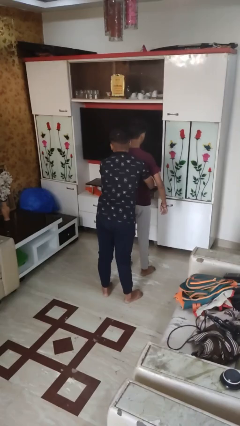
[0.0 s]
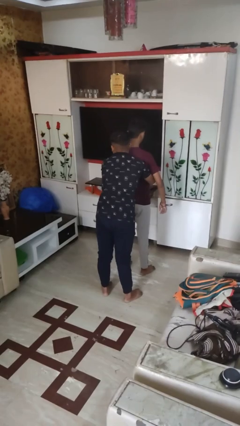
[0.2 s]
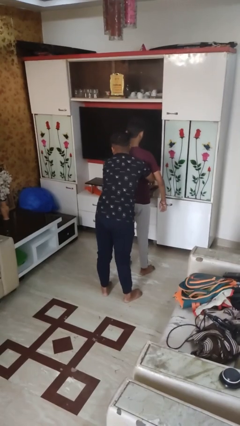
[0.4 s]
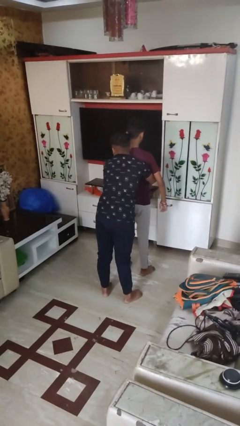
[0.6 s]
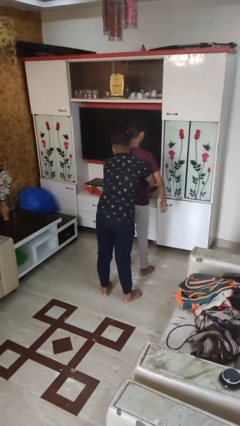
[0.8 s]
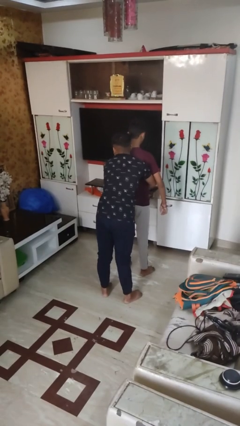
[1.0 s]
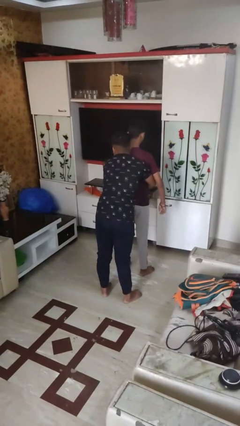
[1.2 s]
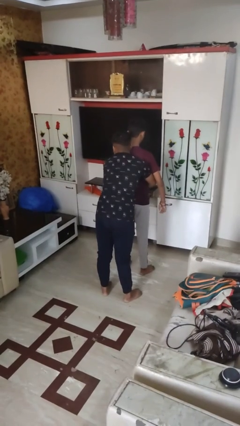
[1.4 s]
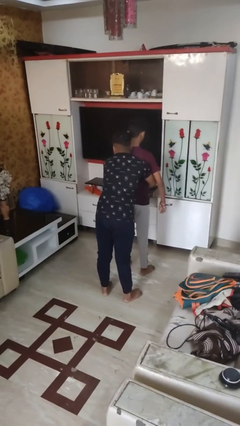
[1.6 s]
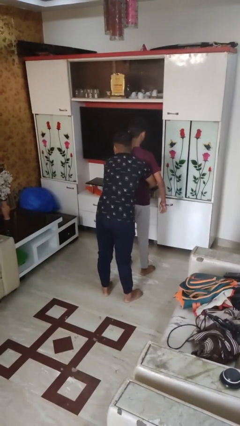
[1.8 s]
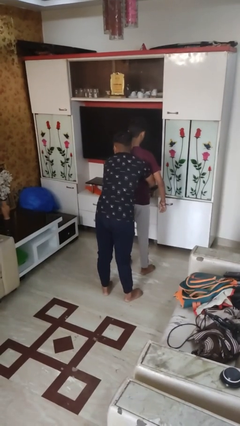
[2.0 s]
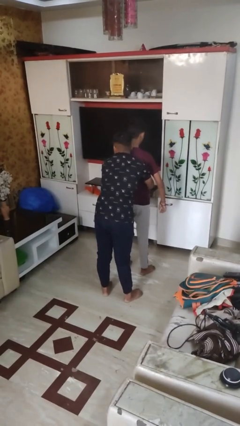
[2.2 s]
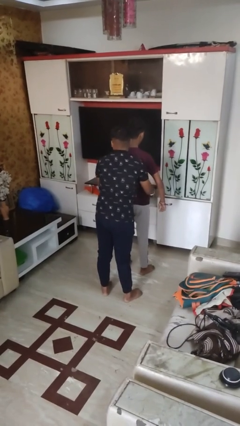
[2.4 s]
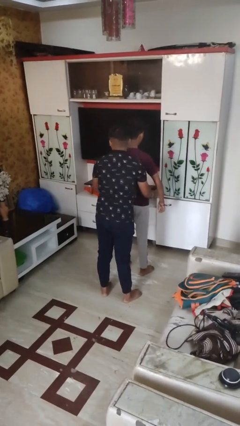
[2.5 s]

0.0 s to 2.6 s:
person hugs person from behind

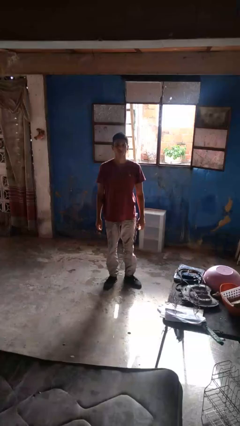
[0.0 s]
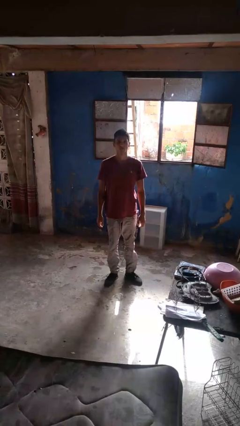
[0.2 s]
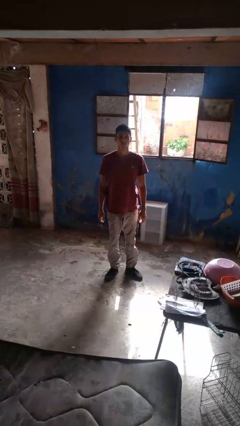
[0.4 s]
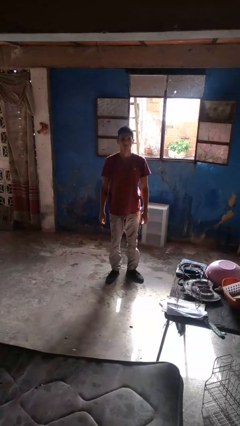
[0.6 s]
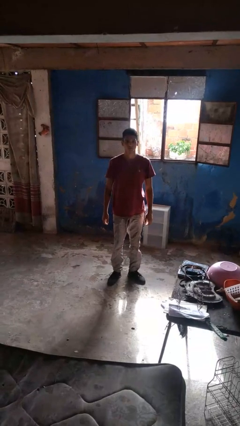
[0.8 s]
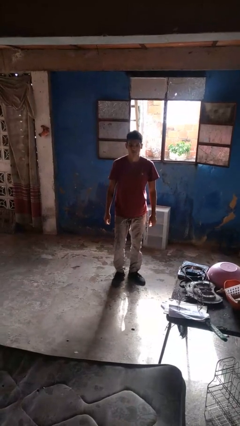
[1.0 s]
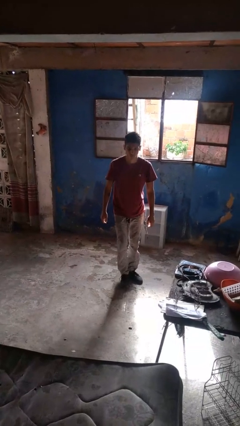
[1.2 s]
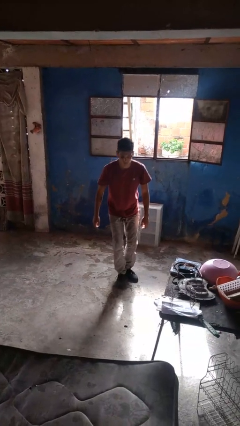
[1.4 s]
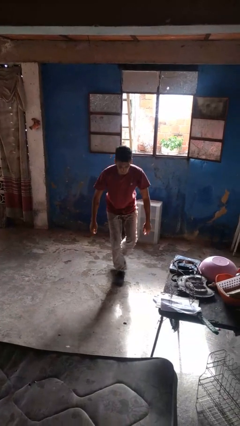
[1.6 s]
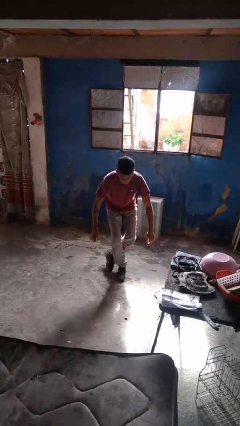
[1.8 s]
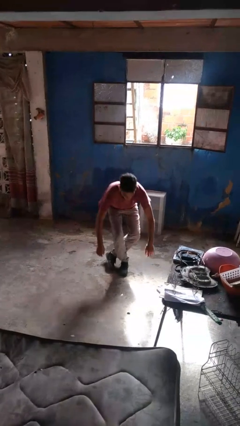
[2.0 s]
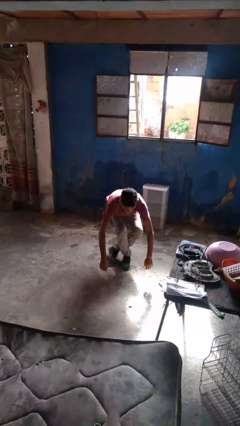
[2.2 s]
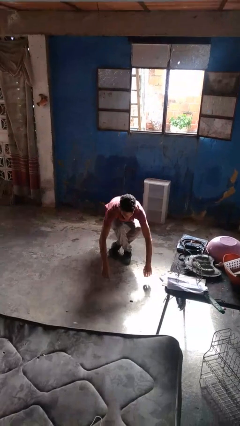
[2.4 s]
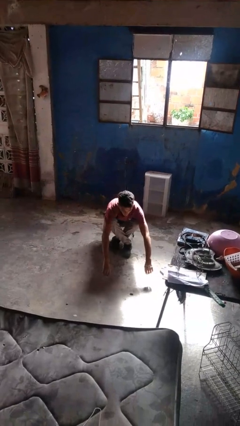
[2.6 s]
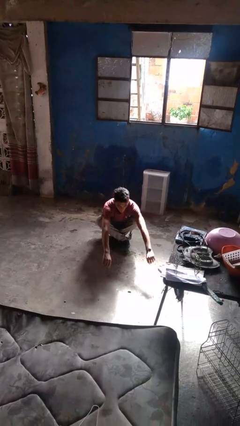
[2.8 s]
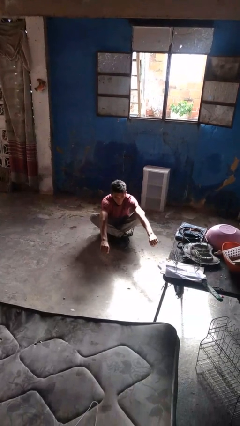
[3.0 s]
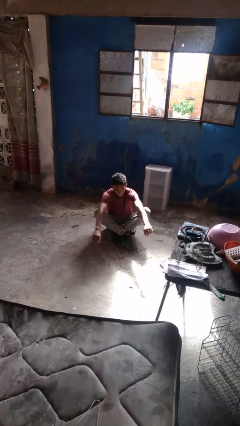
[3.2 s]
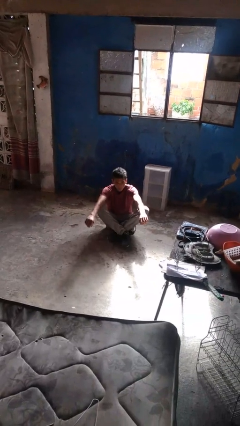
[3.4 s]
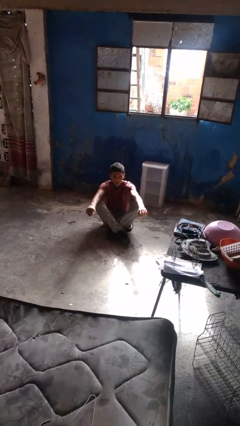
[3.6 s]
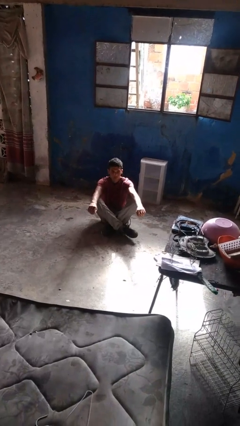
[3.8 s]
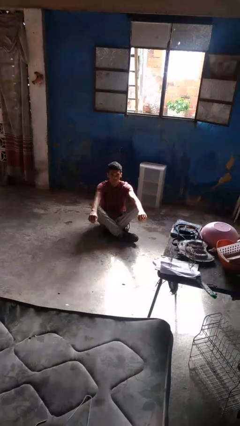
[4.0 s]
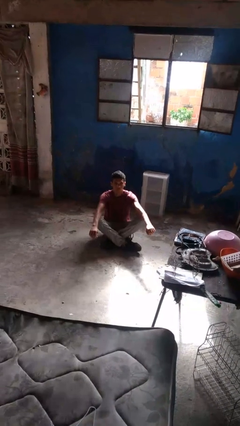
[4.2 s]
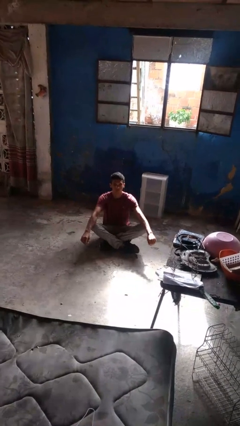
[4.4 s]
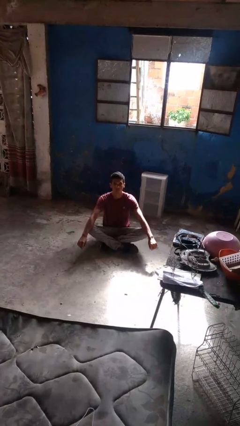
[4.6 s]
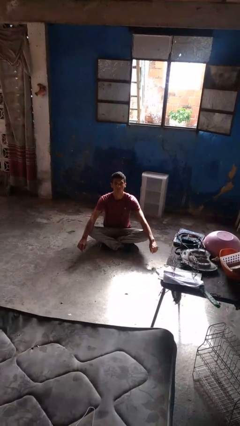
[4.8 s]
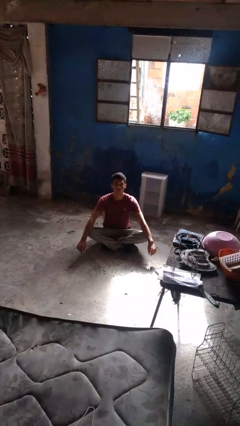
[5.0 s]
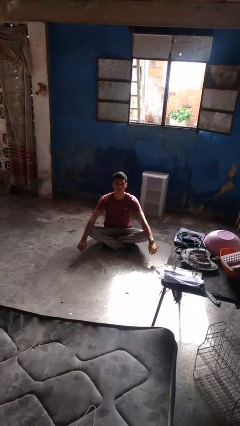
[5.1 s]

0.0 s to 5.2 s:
person sits crisscross

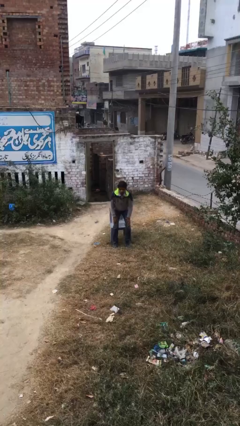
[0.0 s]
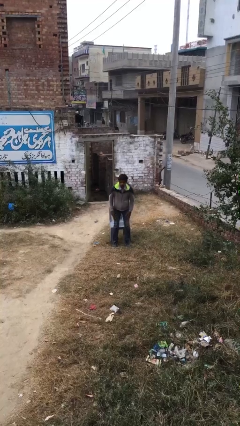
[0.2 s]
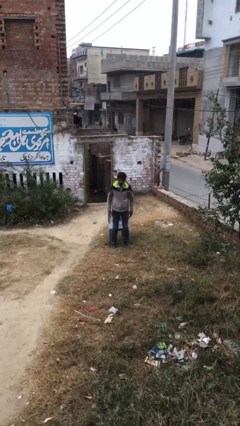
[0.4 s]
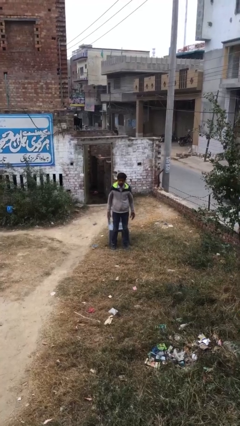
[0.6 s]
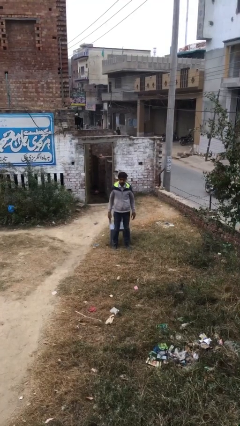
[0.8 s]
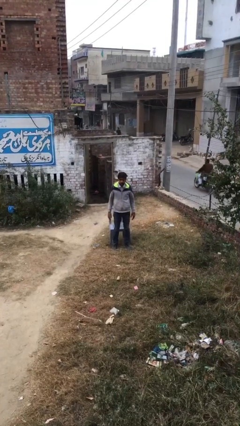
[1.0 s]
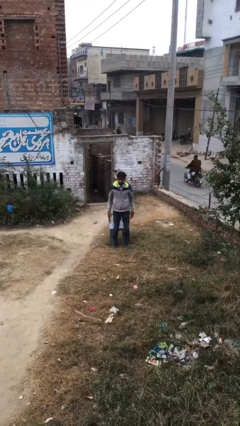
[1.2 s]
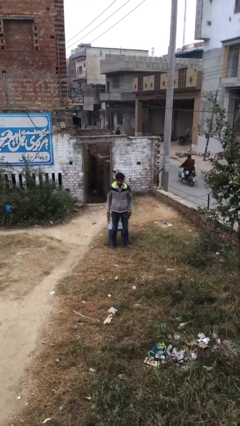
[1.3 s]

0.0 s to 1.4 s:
person stands up

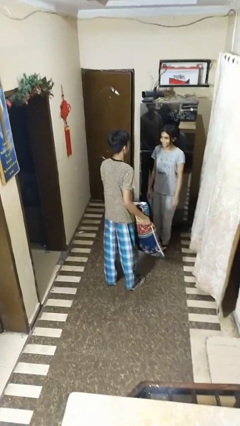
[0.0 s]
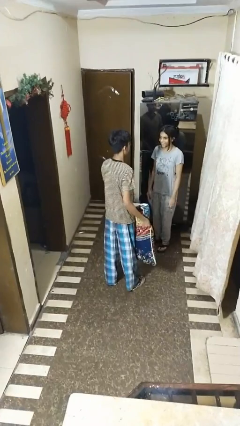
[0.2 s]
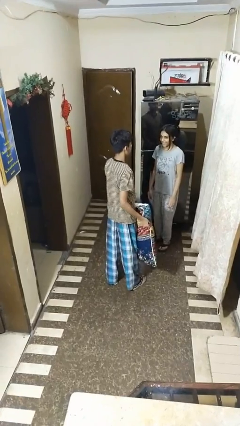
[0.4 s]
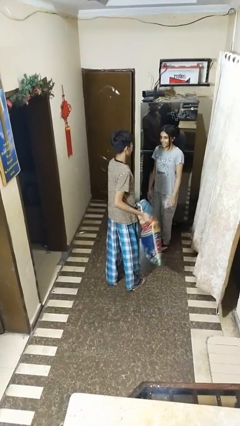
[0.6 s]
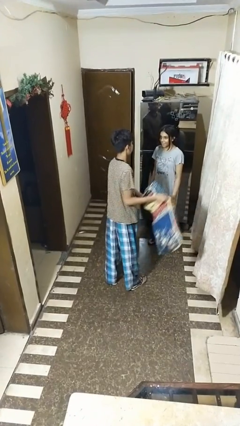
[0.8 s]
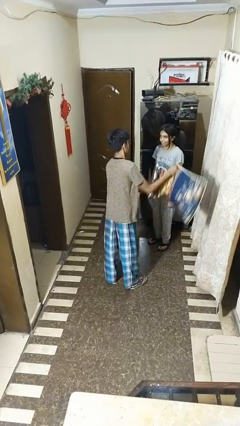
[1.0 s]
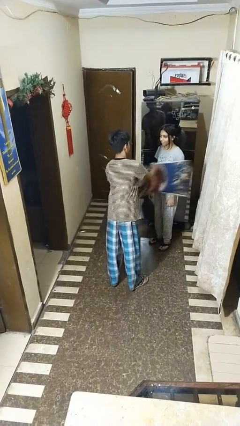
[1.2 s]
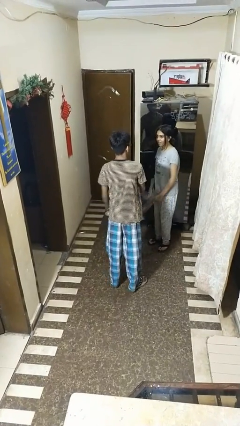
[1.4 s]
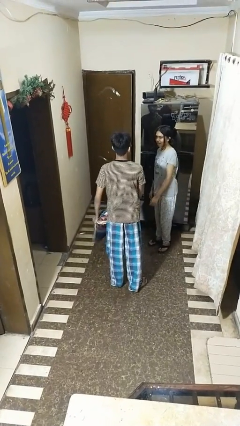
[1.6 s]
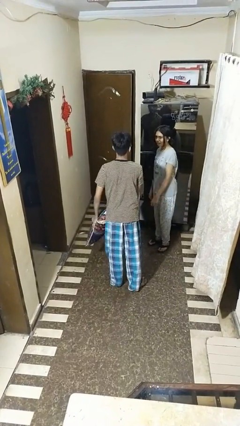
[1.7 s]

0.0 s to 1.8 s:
person hits person with pillow

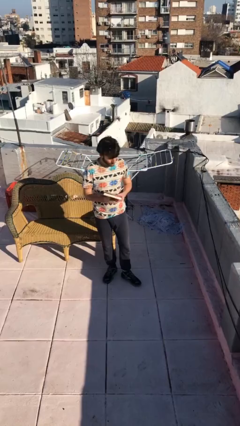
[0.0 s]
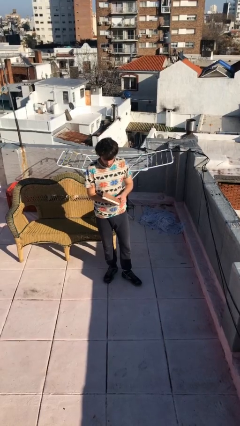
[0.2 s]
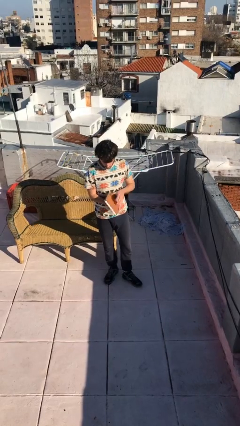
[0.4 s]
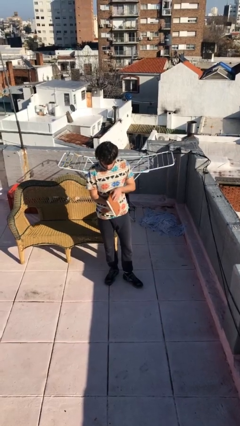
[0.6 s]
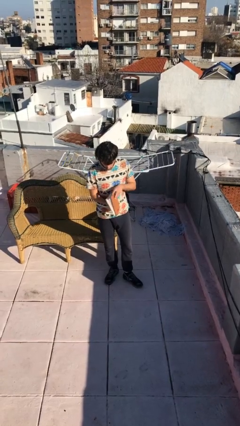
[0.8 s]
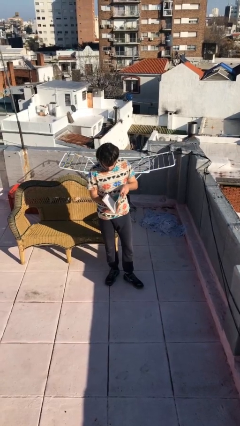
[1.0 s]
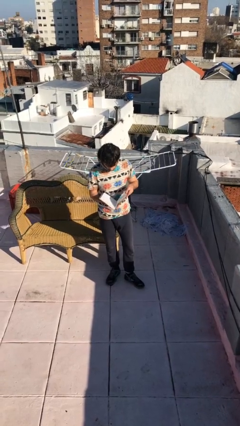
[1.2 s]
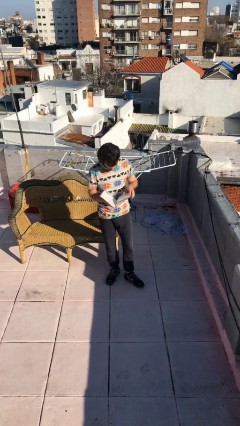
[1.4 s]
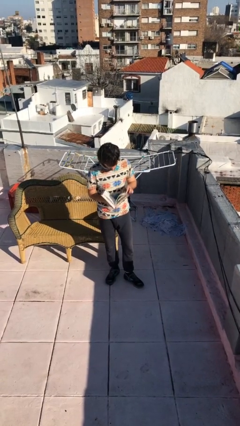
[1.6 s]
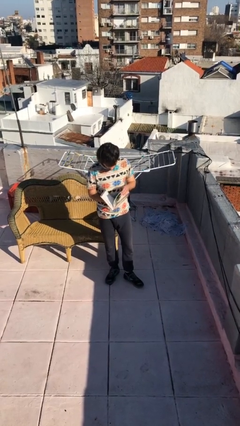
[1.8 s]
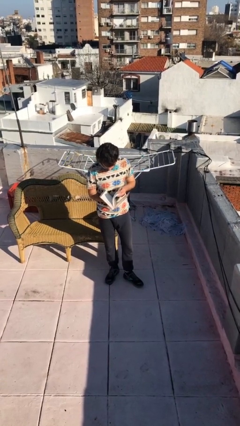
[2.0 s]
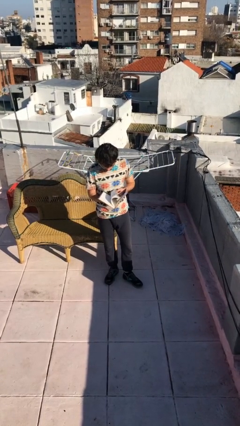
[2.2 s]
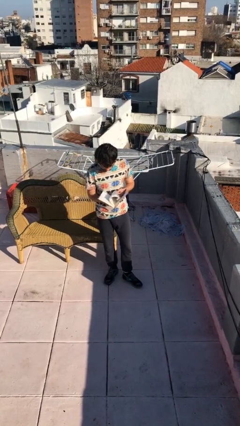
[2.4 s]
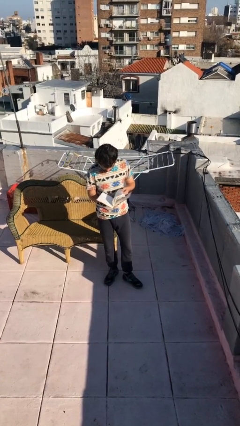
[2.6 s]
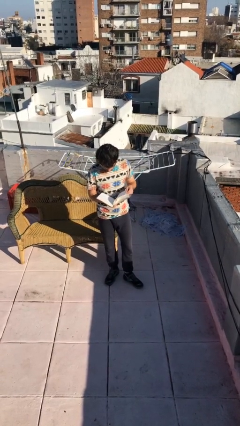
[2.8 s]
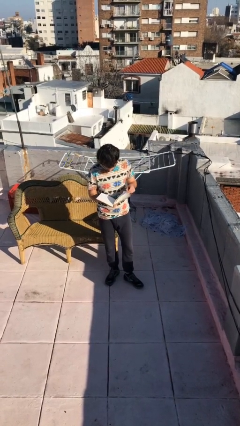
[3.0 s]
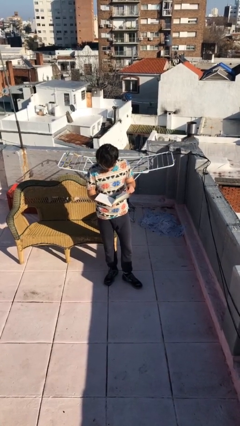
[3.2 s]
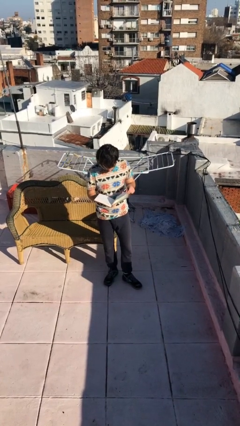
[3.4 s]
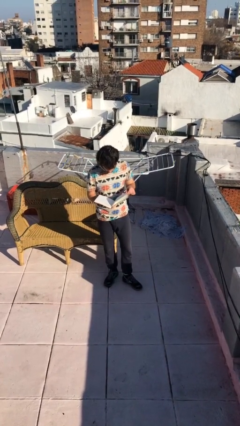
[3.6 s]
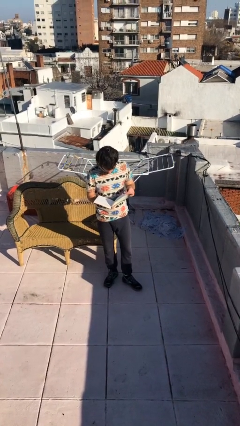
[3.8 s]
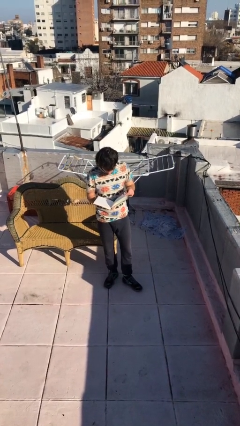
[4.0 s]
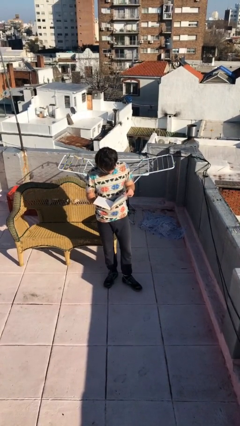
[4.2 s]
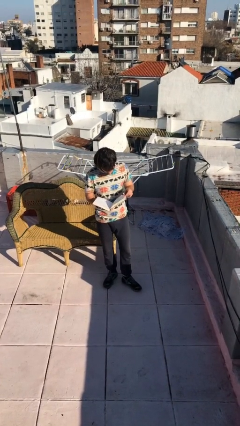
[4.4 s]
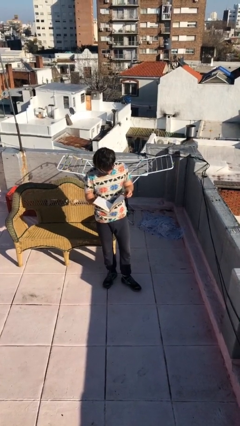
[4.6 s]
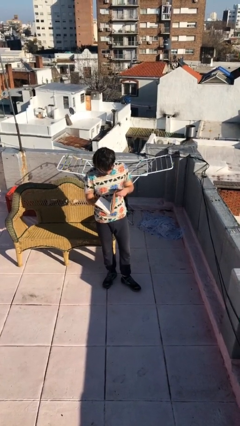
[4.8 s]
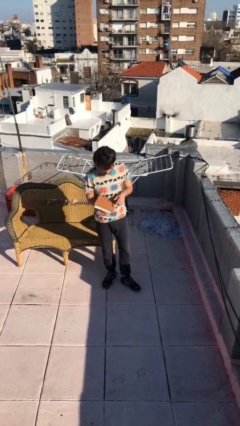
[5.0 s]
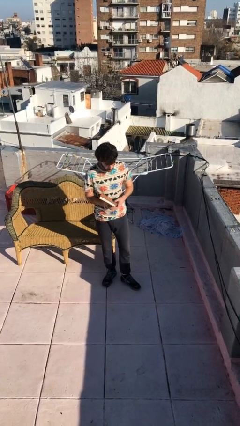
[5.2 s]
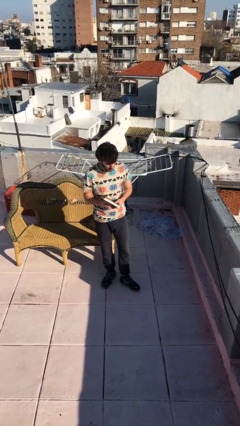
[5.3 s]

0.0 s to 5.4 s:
person reads book

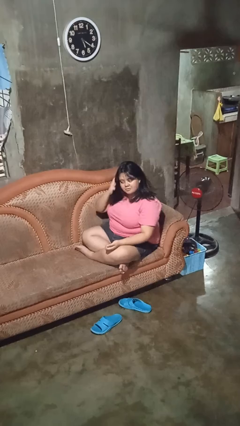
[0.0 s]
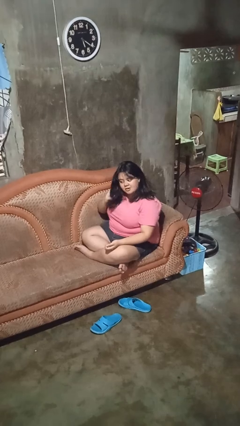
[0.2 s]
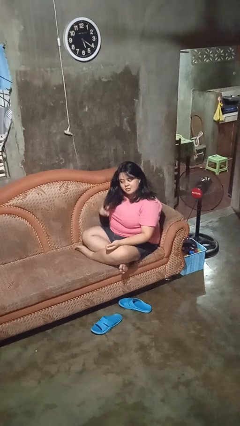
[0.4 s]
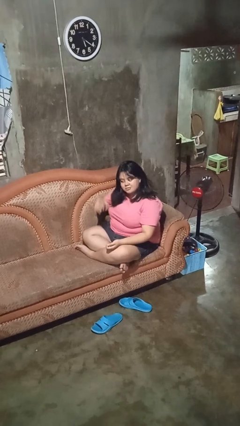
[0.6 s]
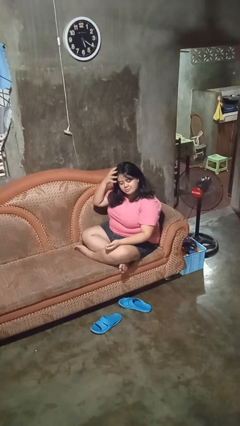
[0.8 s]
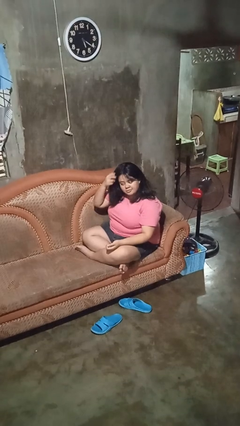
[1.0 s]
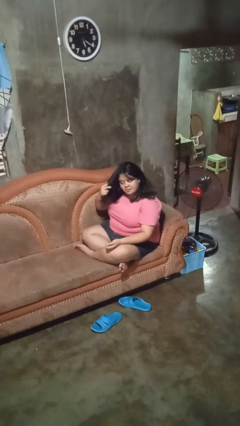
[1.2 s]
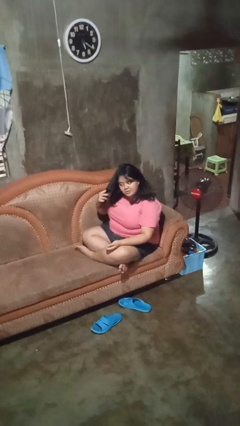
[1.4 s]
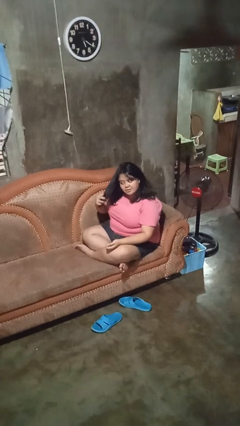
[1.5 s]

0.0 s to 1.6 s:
person strokes hair
